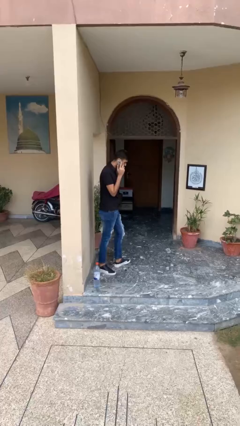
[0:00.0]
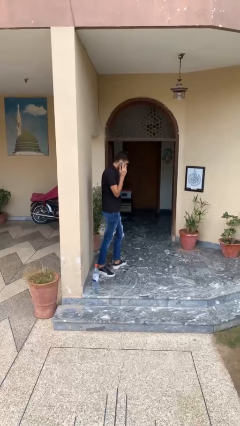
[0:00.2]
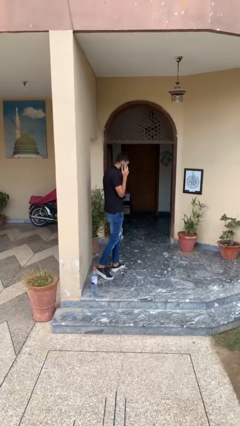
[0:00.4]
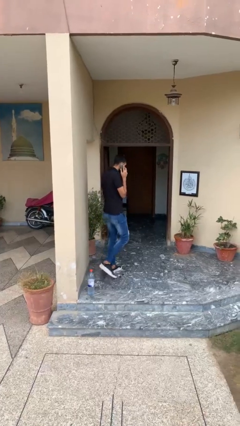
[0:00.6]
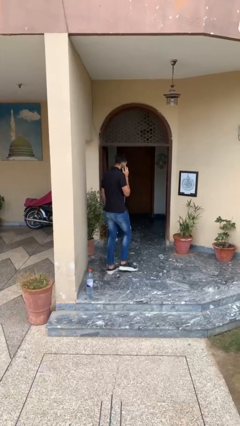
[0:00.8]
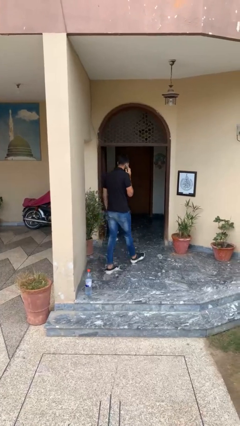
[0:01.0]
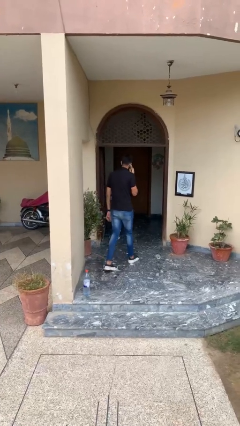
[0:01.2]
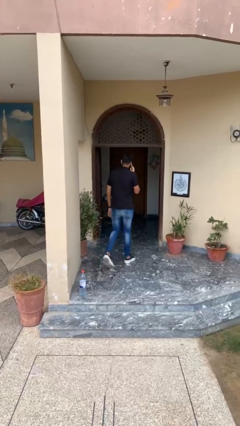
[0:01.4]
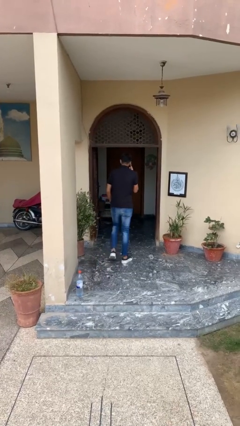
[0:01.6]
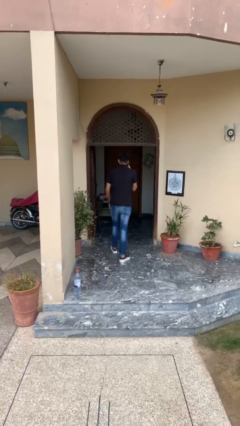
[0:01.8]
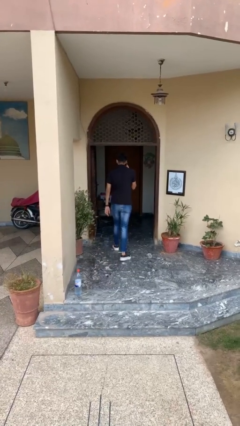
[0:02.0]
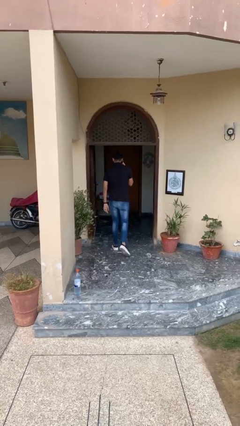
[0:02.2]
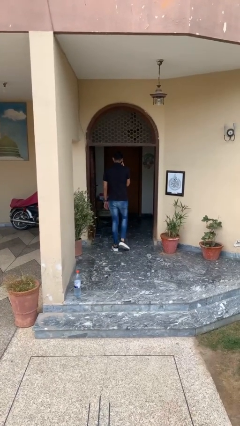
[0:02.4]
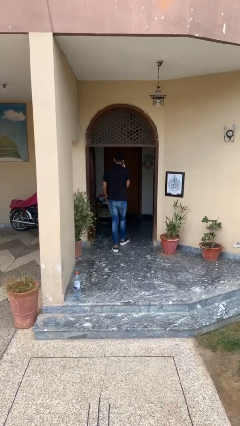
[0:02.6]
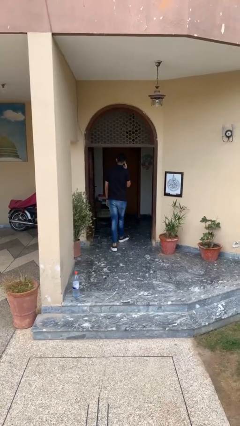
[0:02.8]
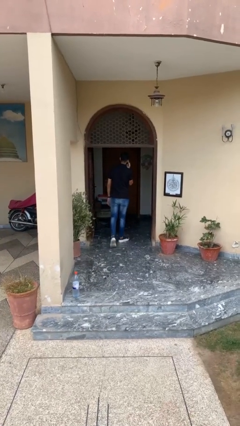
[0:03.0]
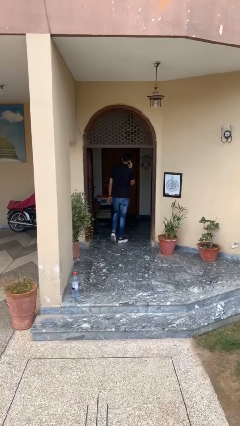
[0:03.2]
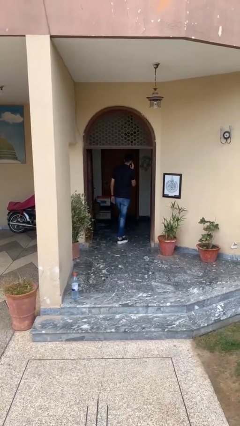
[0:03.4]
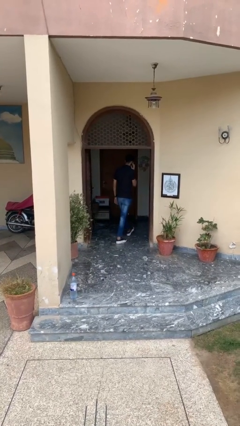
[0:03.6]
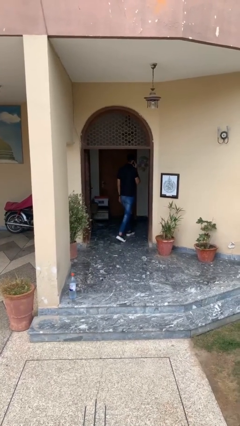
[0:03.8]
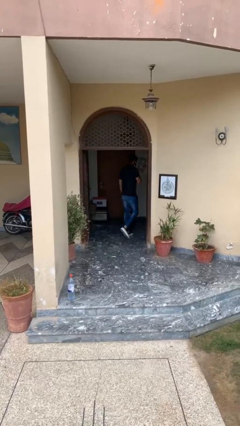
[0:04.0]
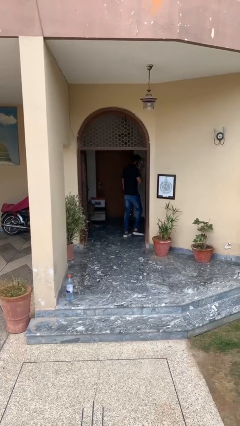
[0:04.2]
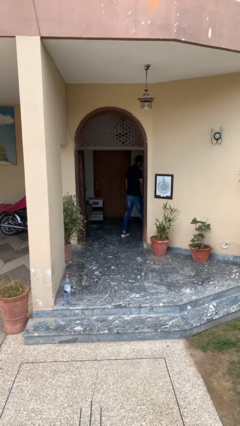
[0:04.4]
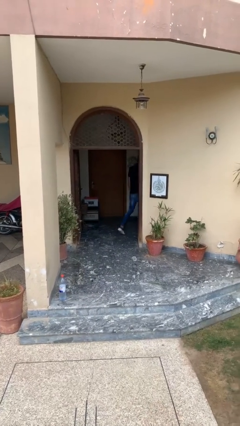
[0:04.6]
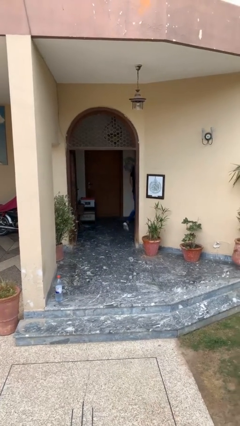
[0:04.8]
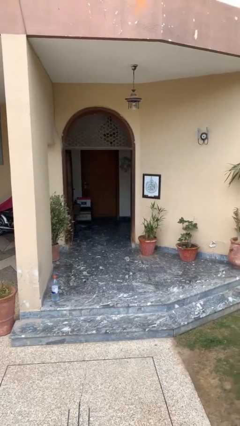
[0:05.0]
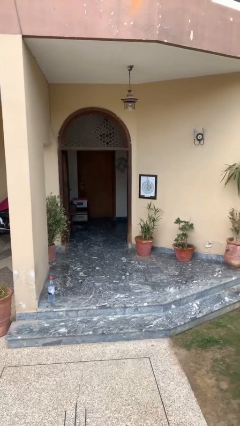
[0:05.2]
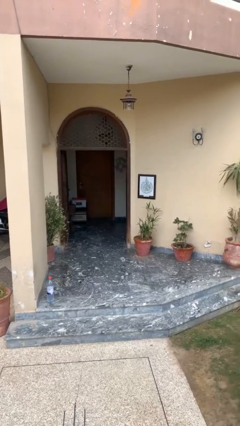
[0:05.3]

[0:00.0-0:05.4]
person exits scene through structure

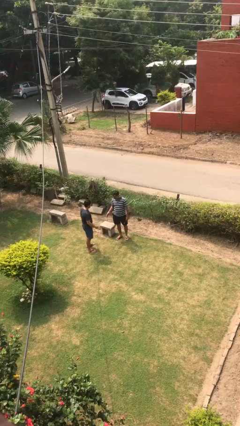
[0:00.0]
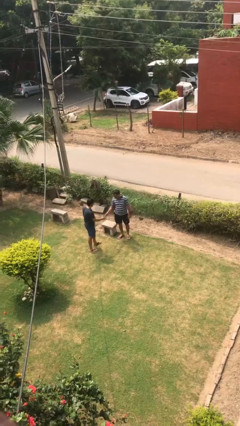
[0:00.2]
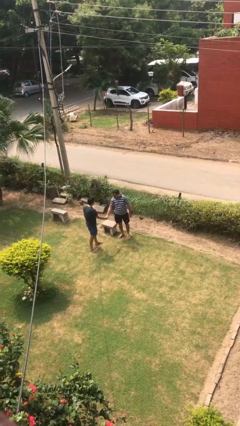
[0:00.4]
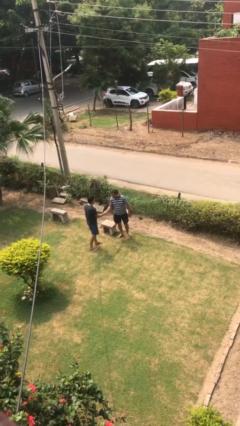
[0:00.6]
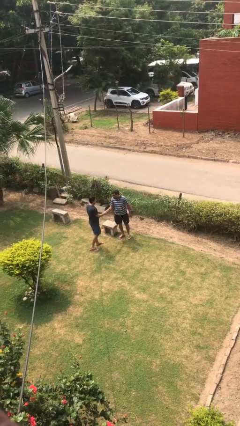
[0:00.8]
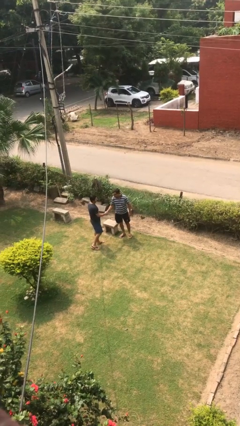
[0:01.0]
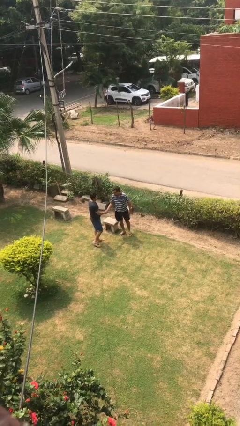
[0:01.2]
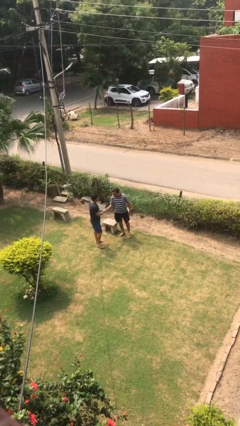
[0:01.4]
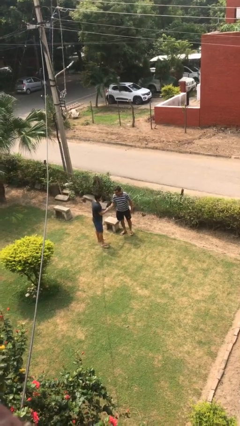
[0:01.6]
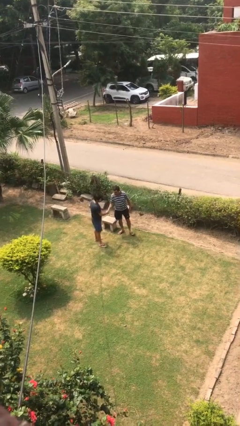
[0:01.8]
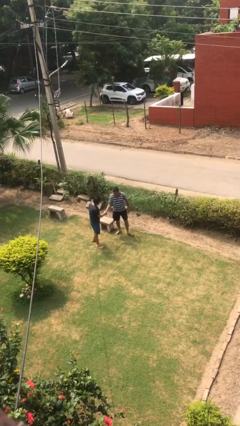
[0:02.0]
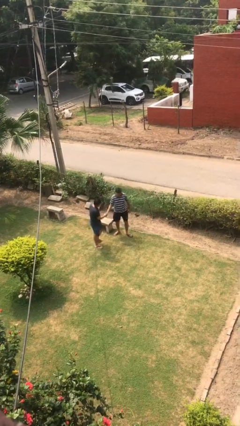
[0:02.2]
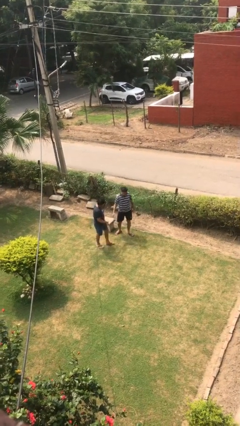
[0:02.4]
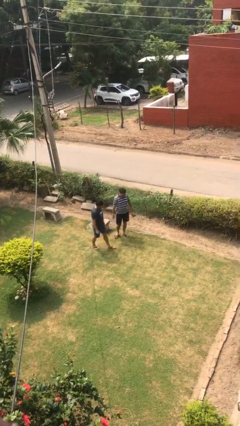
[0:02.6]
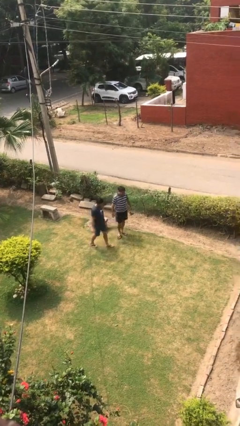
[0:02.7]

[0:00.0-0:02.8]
person shakes hand

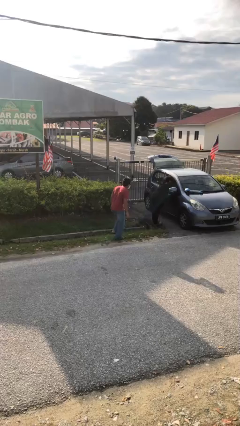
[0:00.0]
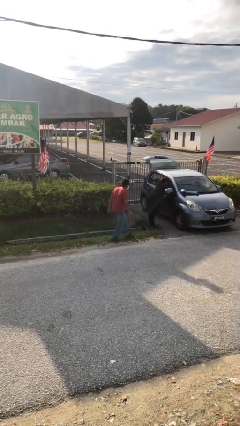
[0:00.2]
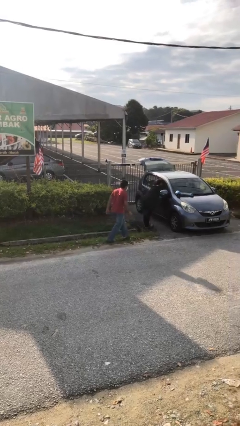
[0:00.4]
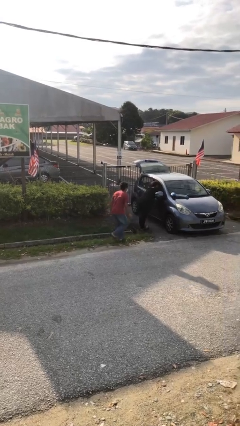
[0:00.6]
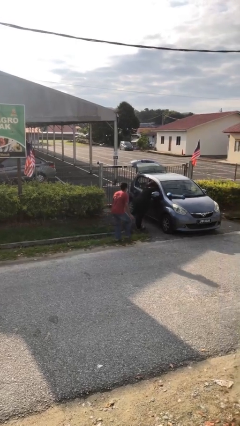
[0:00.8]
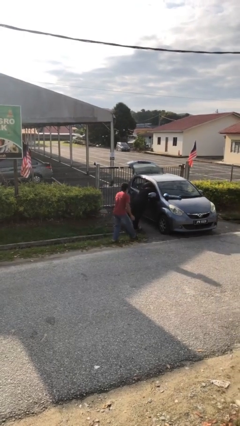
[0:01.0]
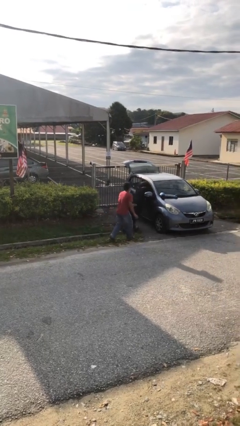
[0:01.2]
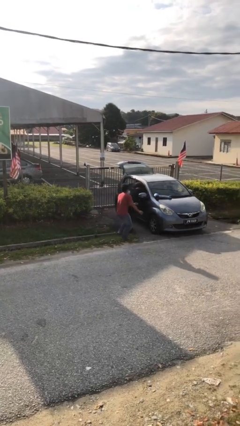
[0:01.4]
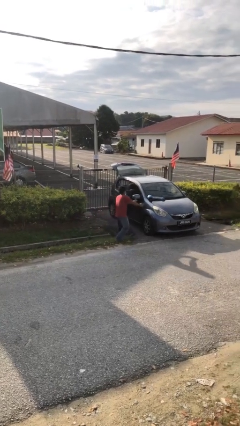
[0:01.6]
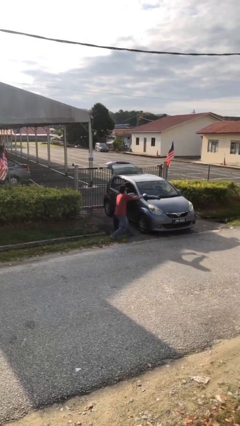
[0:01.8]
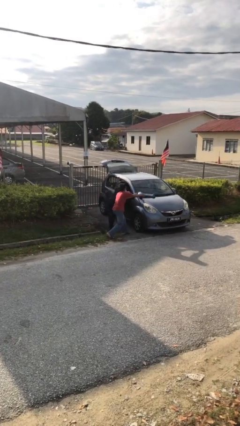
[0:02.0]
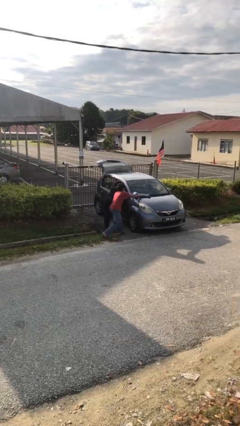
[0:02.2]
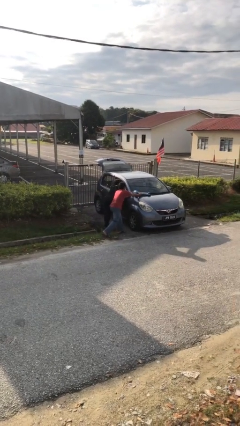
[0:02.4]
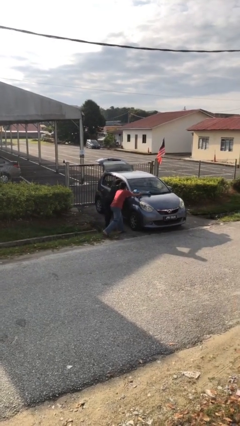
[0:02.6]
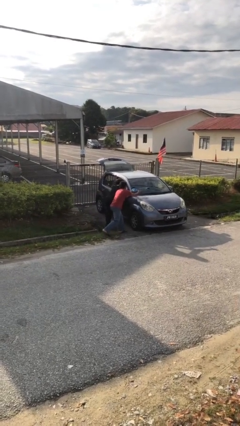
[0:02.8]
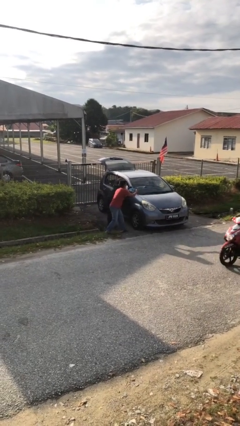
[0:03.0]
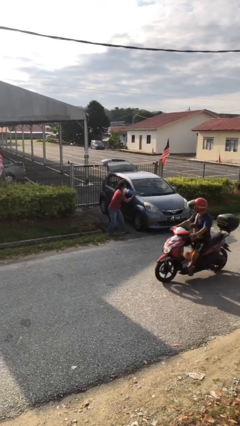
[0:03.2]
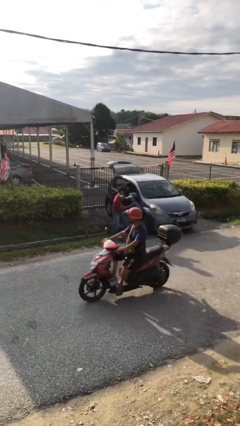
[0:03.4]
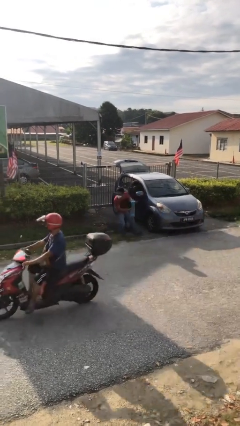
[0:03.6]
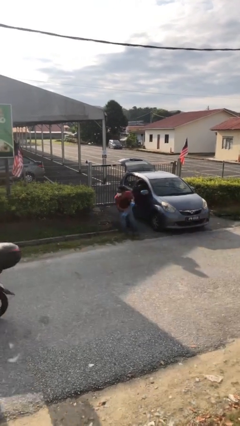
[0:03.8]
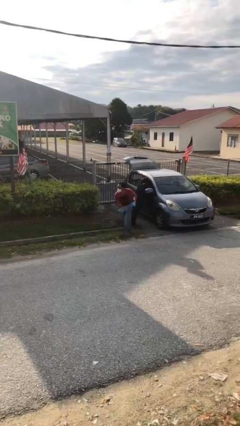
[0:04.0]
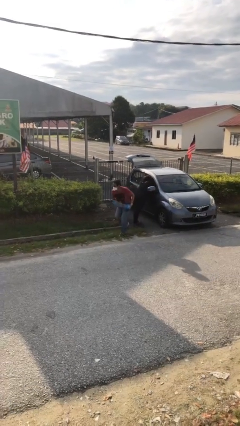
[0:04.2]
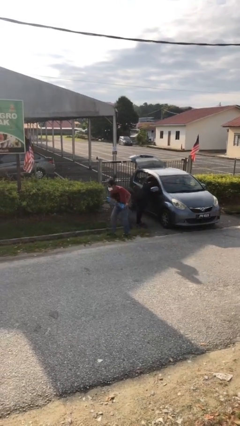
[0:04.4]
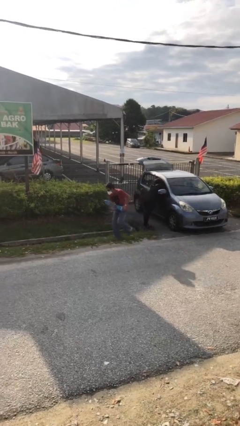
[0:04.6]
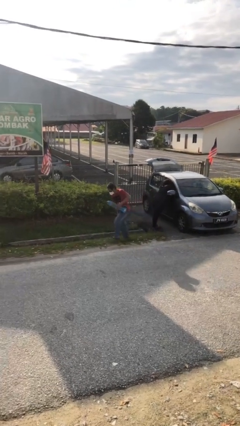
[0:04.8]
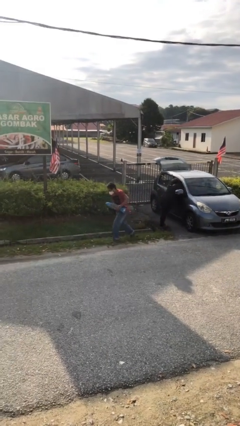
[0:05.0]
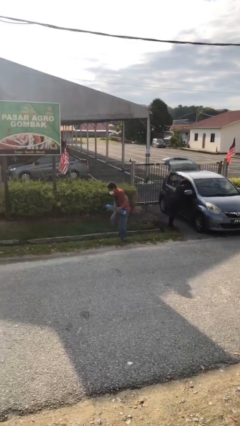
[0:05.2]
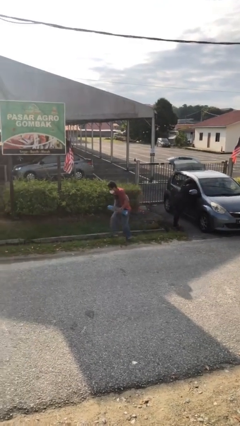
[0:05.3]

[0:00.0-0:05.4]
person steals object from person

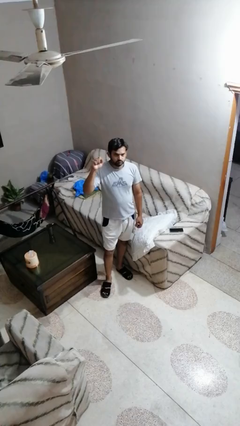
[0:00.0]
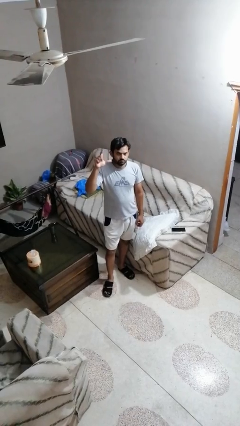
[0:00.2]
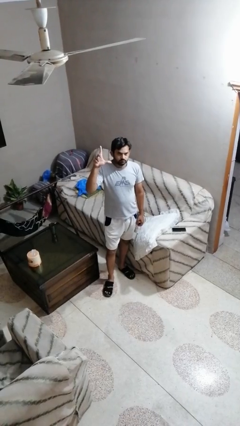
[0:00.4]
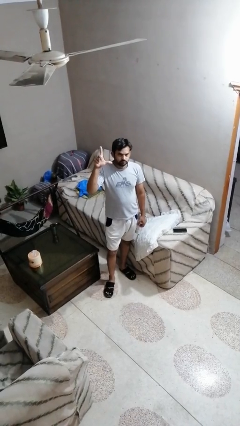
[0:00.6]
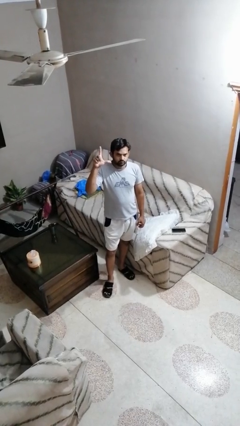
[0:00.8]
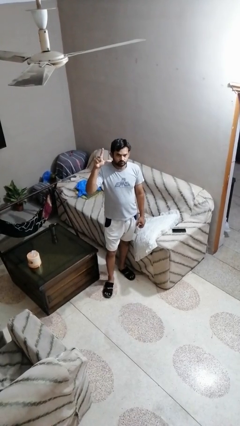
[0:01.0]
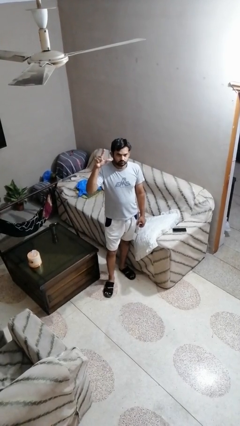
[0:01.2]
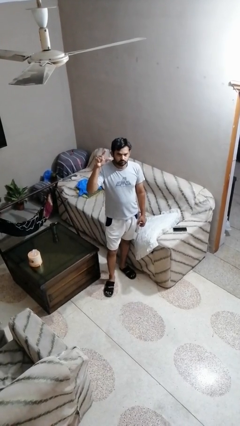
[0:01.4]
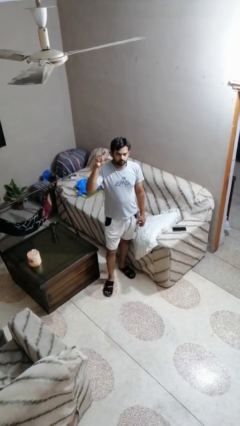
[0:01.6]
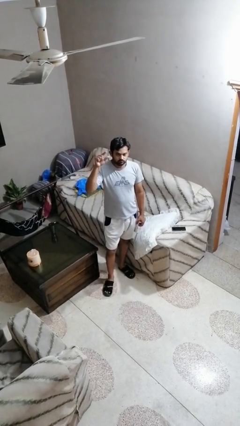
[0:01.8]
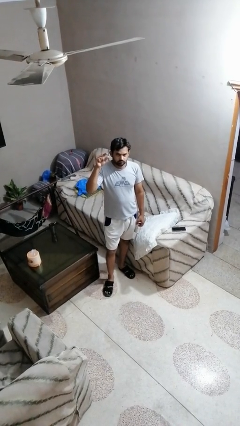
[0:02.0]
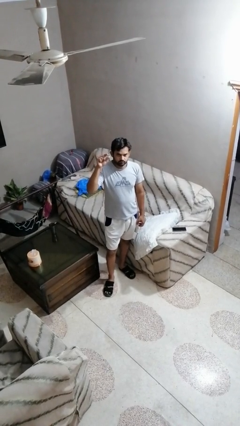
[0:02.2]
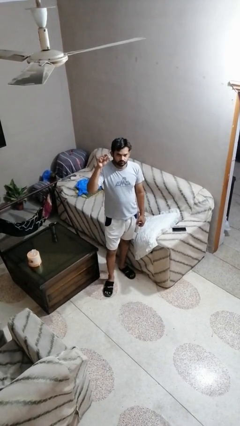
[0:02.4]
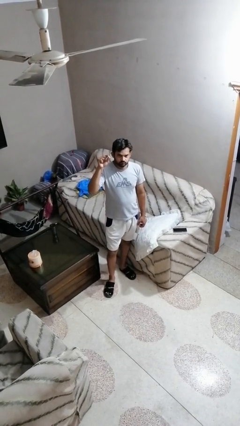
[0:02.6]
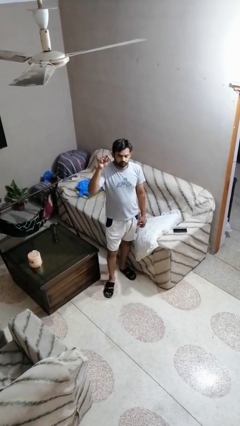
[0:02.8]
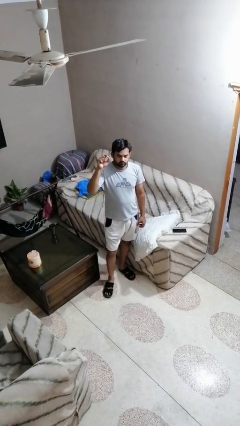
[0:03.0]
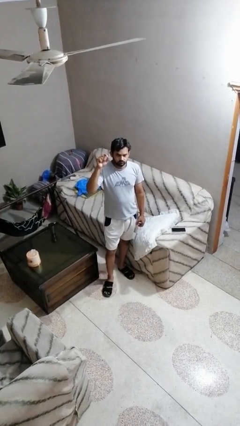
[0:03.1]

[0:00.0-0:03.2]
person gestures zoom in

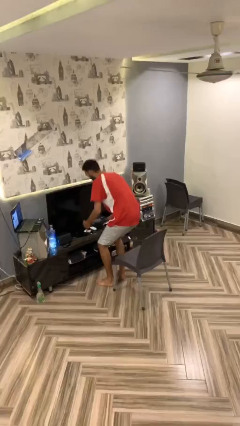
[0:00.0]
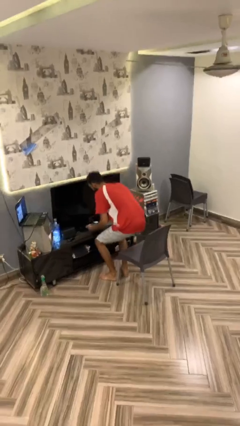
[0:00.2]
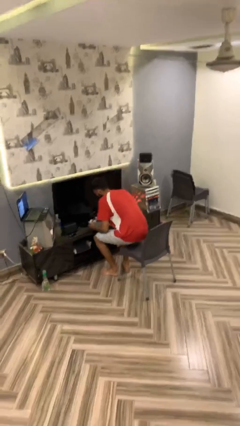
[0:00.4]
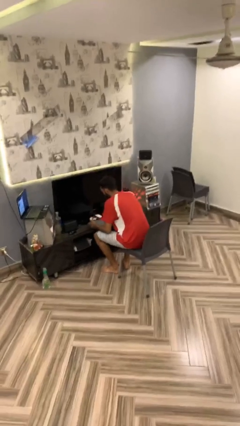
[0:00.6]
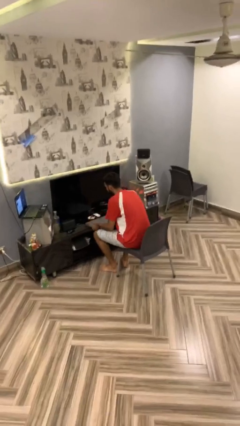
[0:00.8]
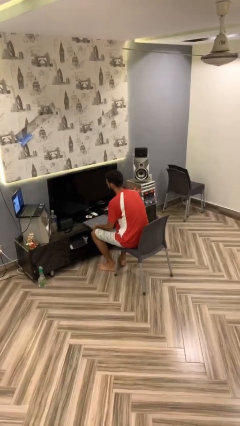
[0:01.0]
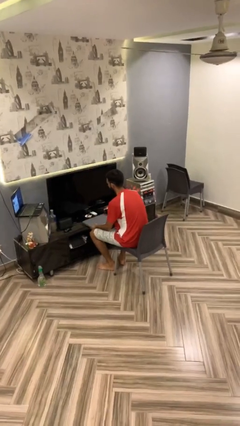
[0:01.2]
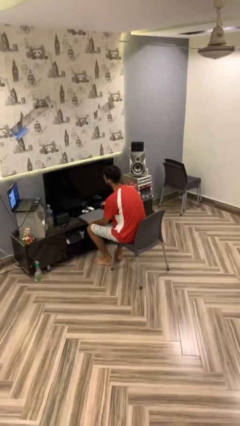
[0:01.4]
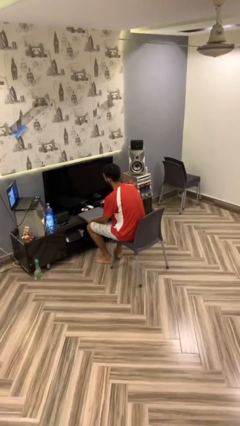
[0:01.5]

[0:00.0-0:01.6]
person sits down
